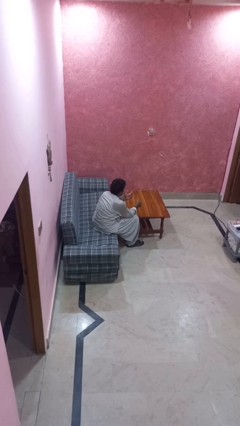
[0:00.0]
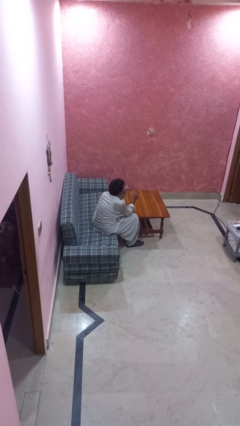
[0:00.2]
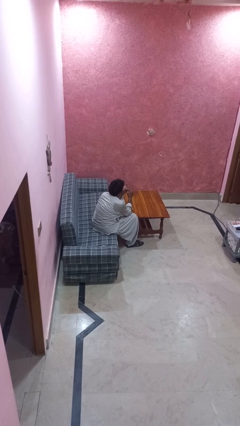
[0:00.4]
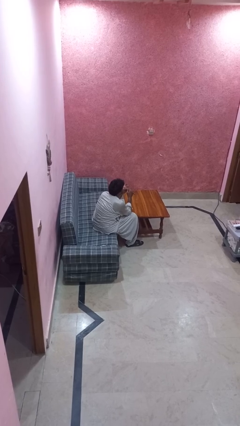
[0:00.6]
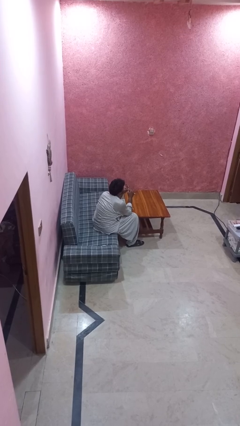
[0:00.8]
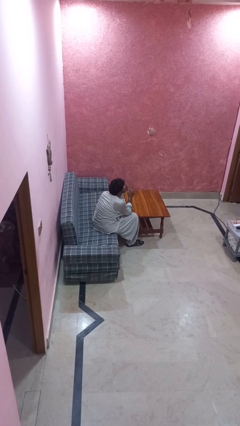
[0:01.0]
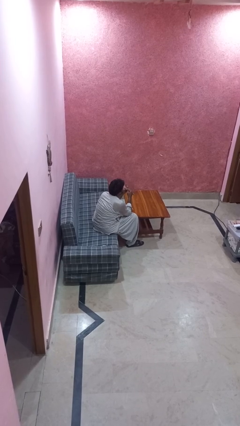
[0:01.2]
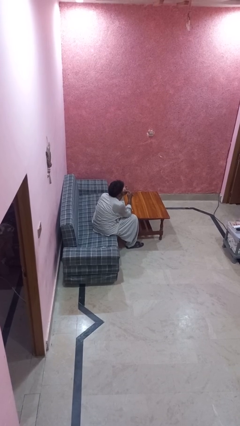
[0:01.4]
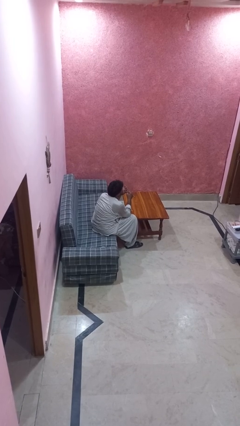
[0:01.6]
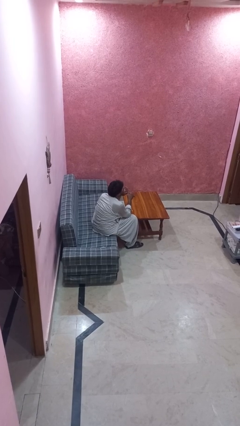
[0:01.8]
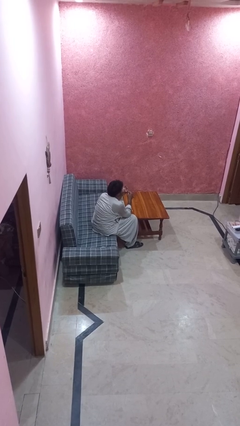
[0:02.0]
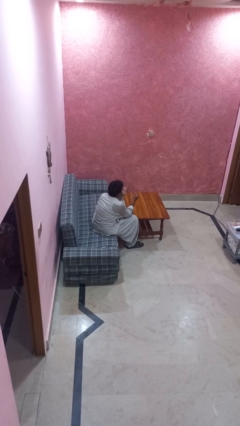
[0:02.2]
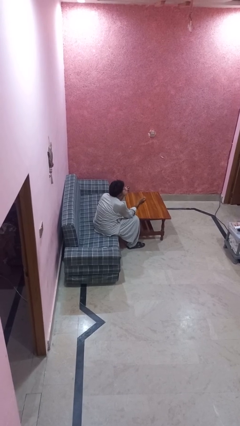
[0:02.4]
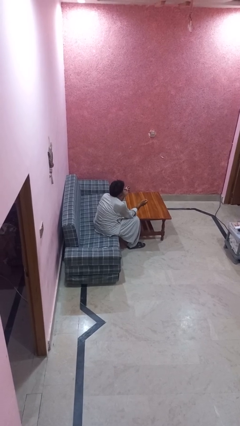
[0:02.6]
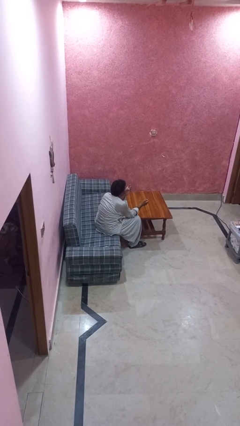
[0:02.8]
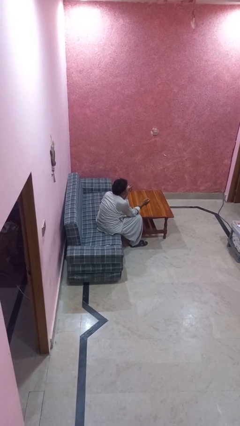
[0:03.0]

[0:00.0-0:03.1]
person files fingernails

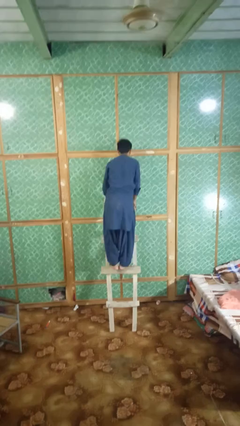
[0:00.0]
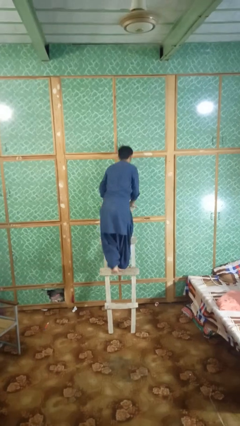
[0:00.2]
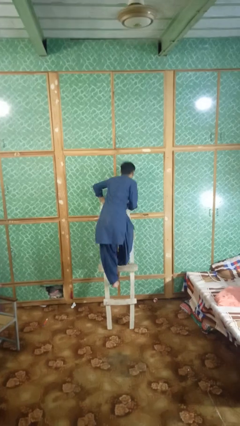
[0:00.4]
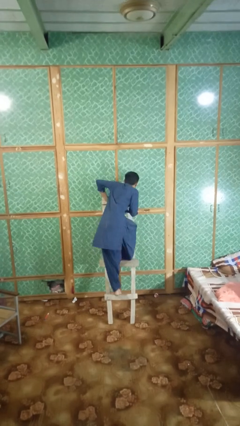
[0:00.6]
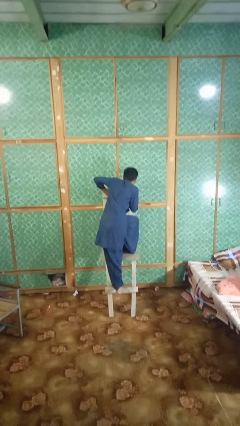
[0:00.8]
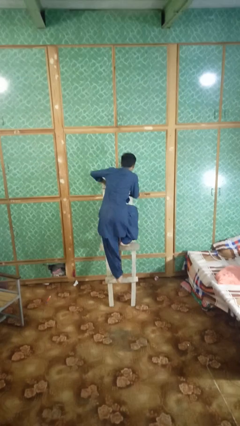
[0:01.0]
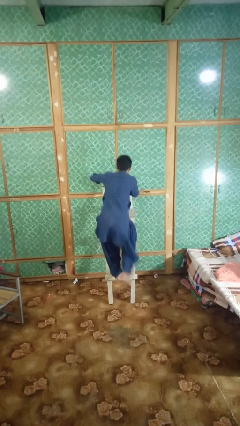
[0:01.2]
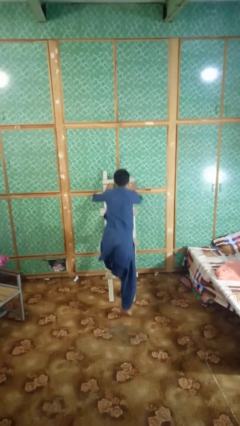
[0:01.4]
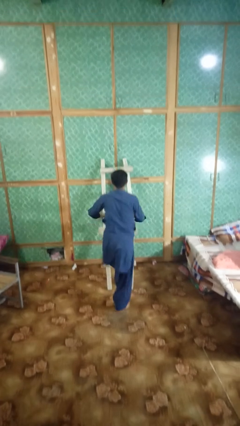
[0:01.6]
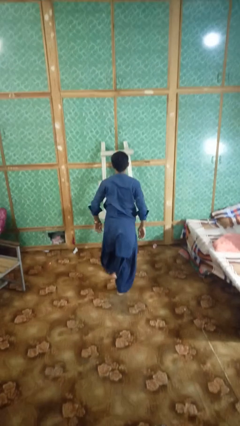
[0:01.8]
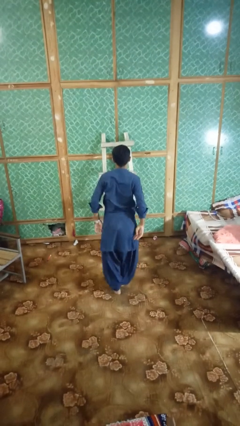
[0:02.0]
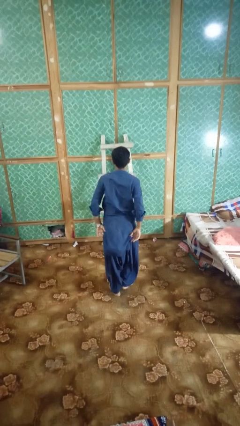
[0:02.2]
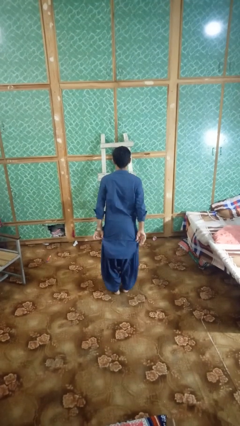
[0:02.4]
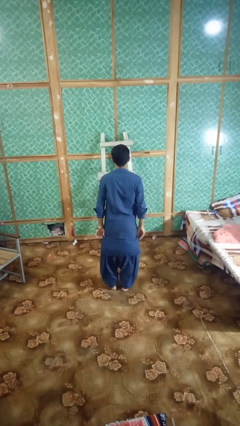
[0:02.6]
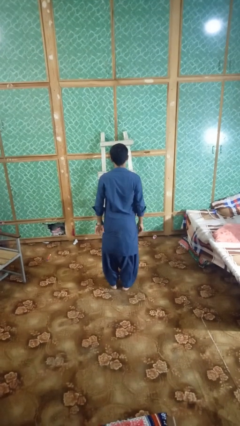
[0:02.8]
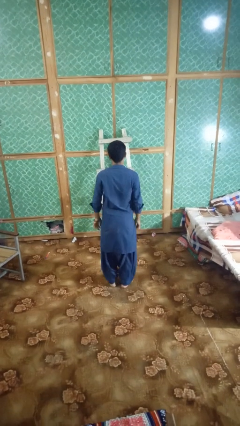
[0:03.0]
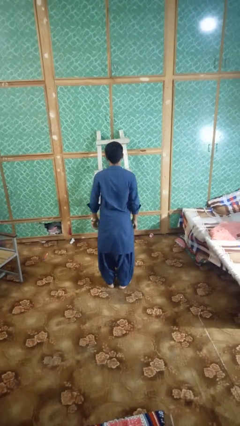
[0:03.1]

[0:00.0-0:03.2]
person climbs down ladder

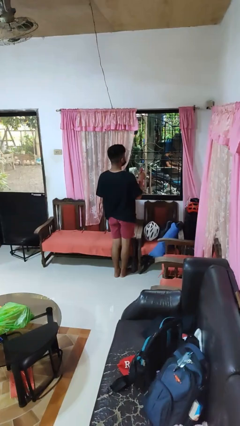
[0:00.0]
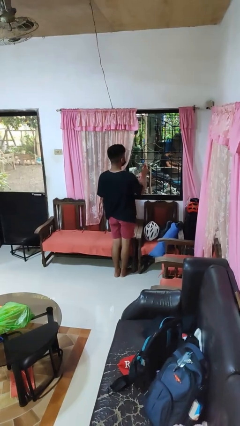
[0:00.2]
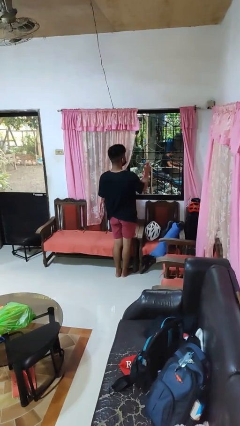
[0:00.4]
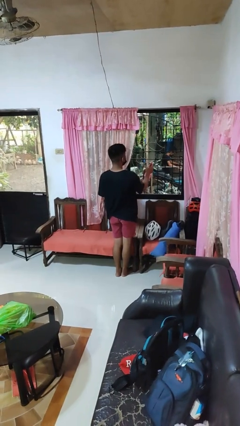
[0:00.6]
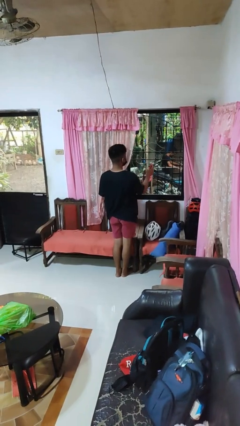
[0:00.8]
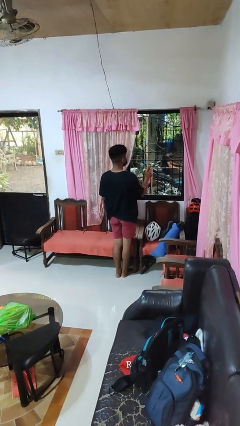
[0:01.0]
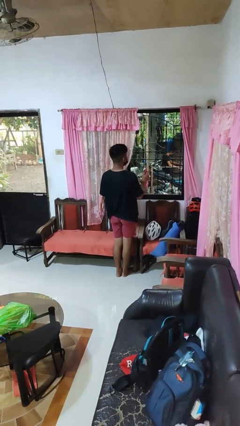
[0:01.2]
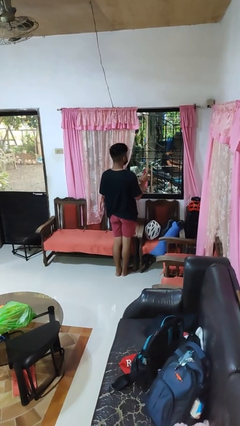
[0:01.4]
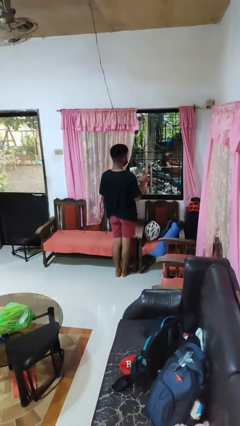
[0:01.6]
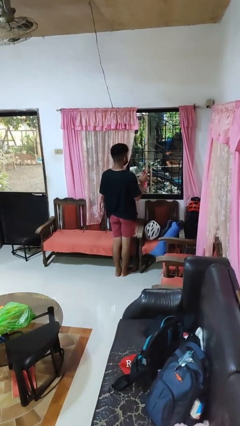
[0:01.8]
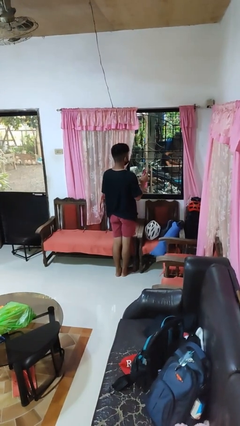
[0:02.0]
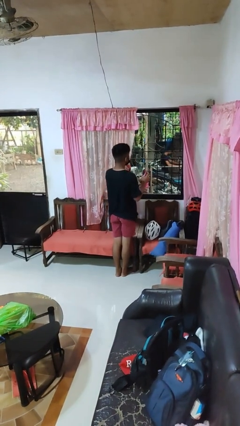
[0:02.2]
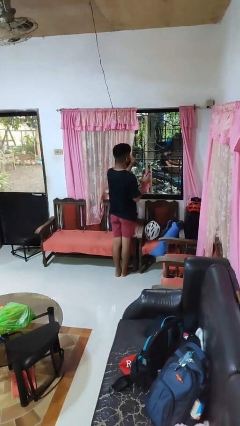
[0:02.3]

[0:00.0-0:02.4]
person sprays from bottle

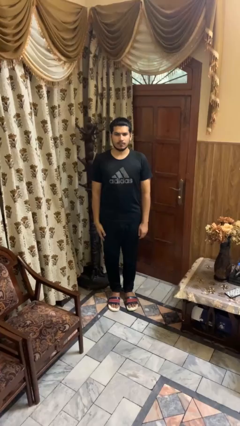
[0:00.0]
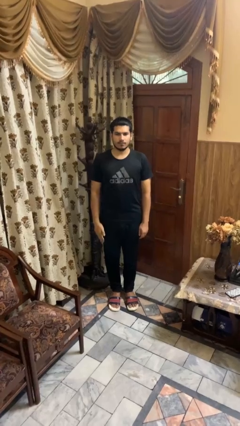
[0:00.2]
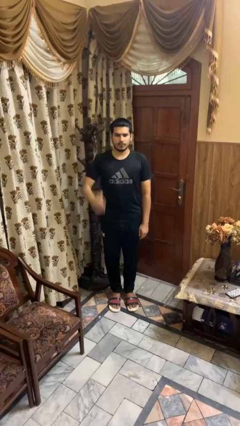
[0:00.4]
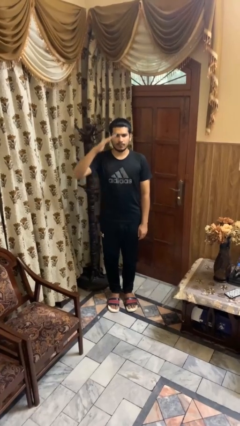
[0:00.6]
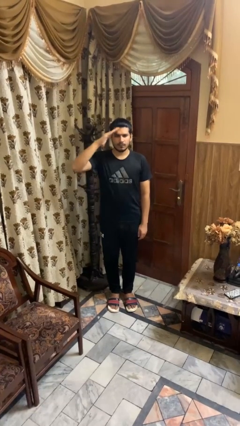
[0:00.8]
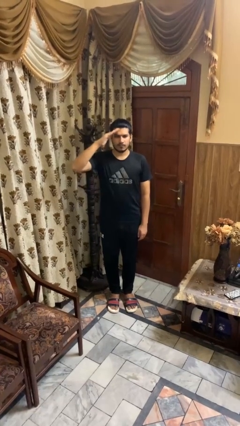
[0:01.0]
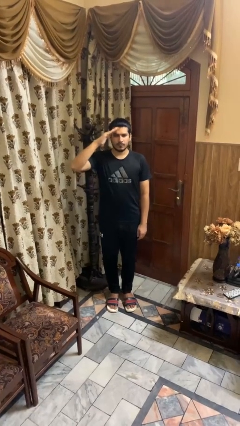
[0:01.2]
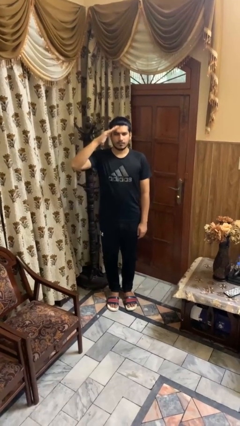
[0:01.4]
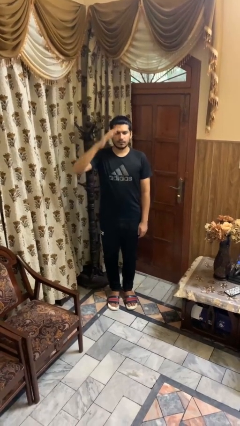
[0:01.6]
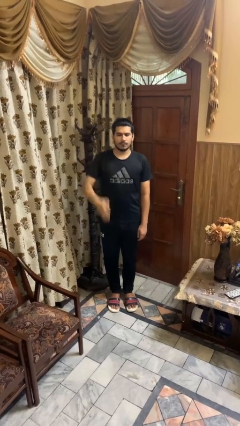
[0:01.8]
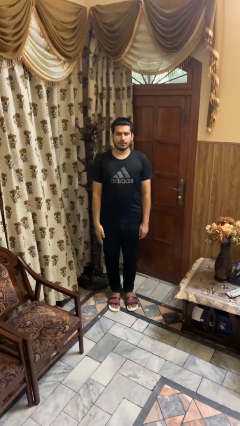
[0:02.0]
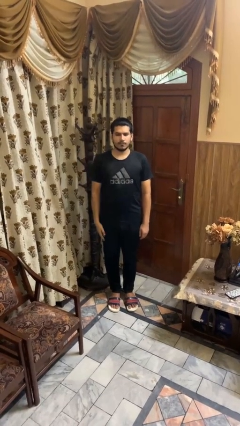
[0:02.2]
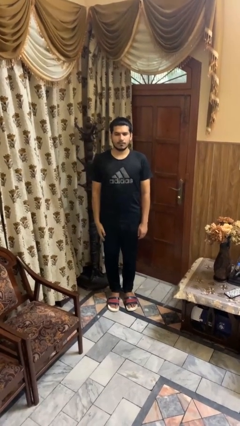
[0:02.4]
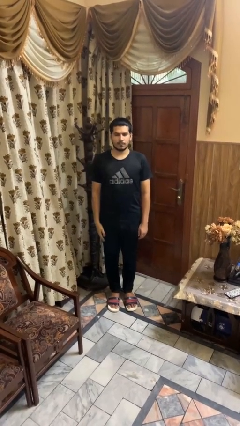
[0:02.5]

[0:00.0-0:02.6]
person salutes

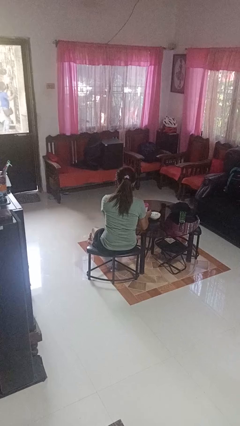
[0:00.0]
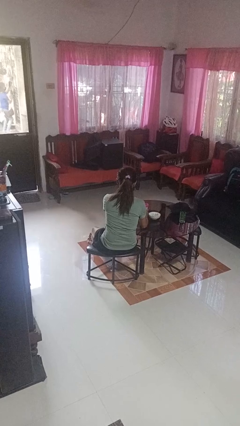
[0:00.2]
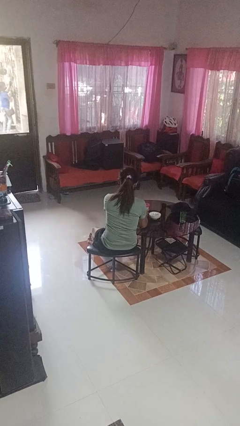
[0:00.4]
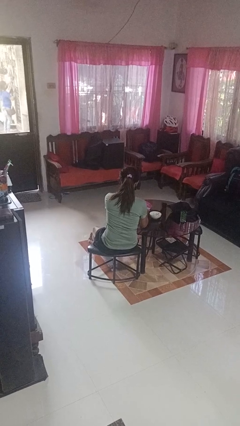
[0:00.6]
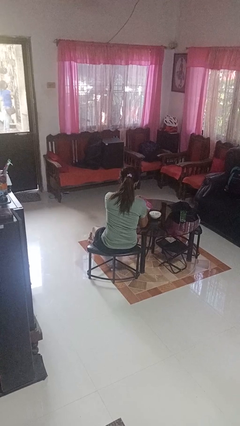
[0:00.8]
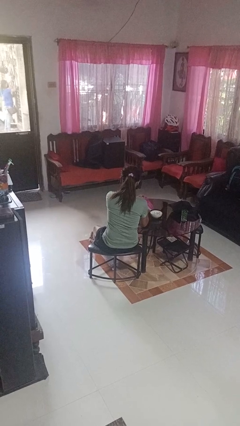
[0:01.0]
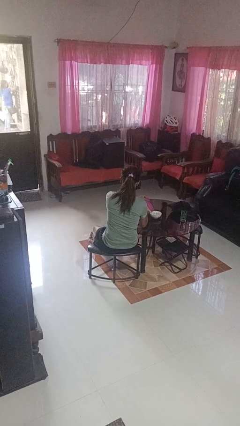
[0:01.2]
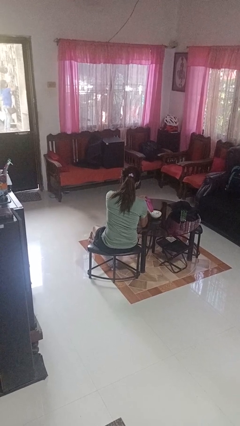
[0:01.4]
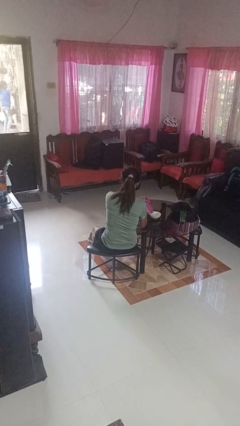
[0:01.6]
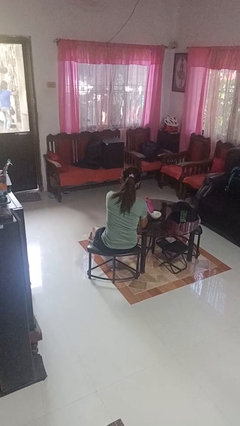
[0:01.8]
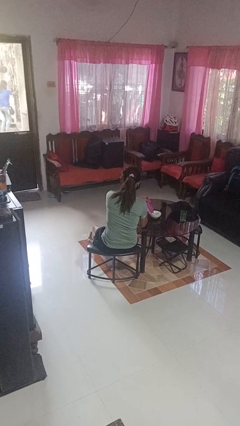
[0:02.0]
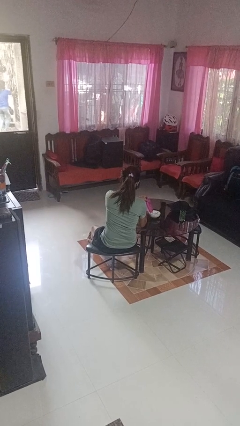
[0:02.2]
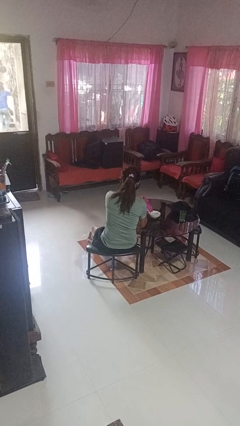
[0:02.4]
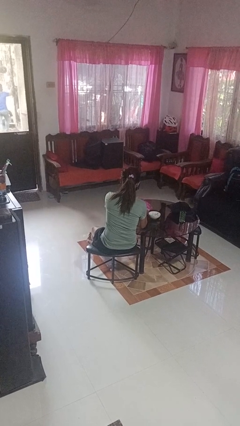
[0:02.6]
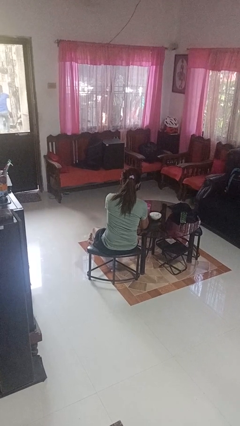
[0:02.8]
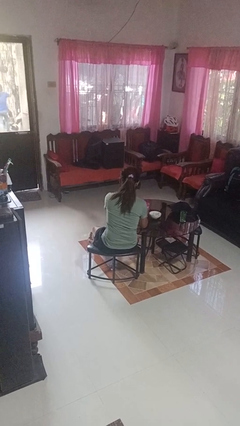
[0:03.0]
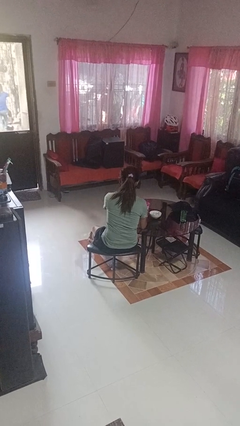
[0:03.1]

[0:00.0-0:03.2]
person pours into bowl

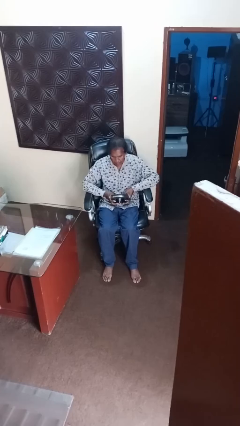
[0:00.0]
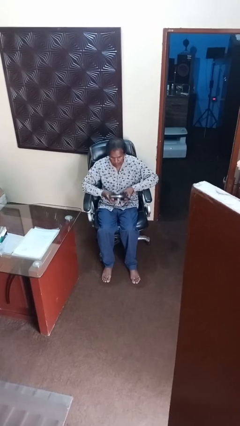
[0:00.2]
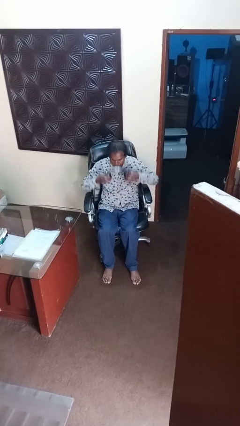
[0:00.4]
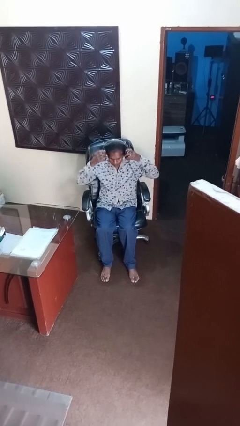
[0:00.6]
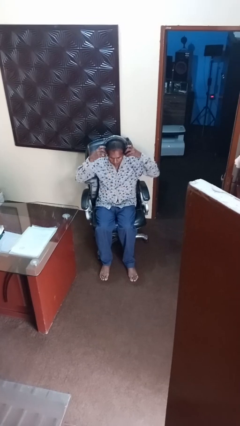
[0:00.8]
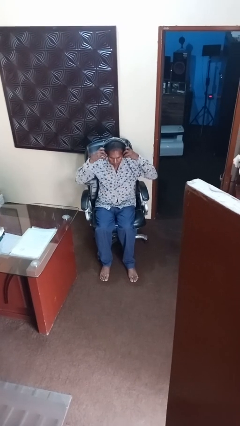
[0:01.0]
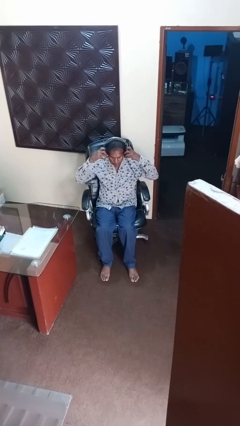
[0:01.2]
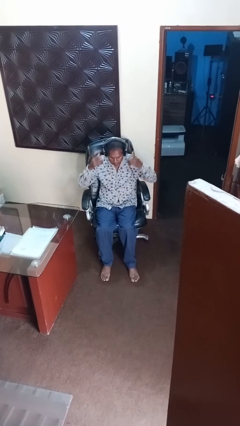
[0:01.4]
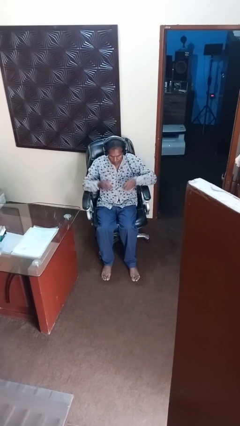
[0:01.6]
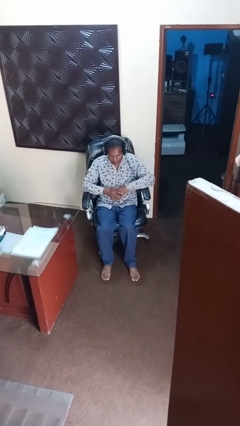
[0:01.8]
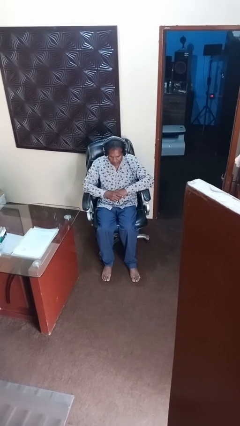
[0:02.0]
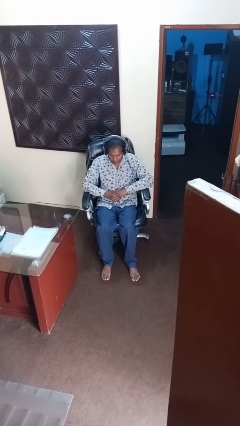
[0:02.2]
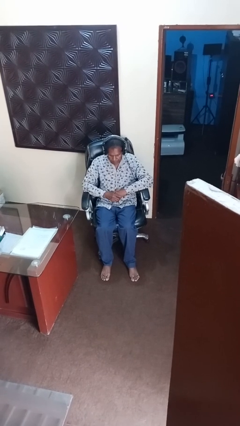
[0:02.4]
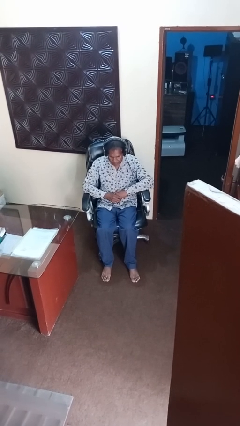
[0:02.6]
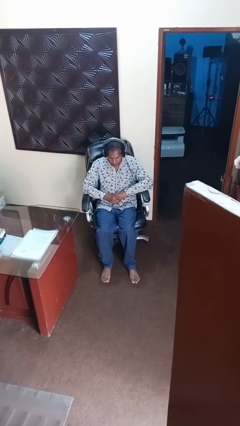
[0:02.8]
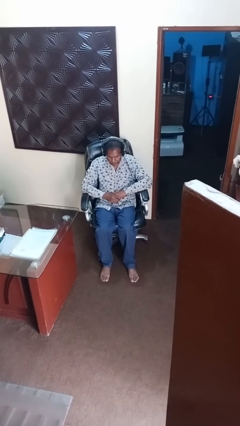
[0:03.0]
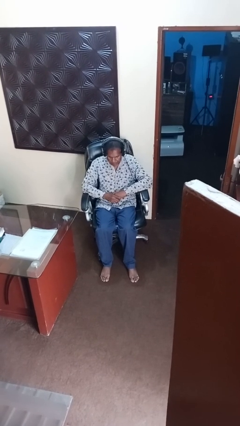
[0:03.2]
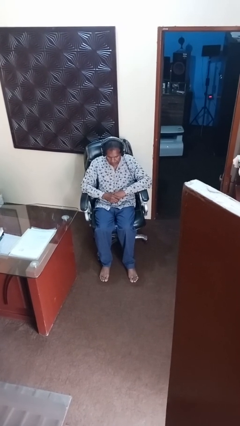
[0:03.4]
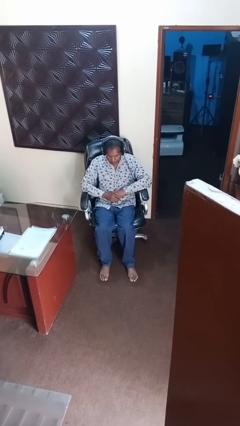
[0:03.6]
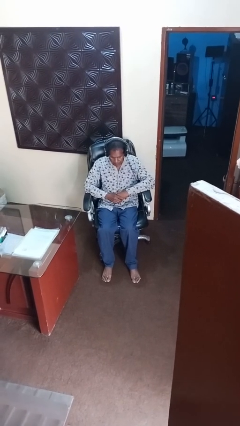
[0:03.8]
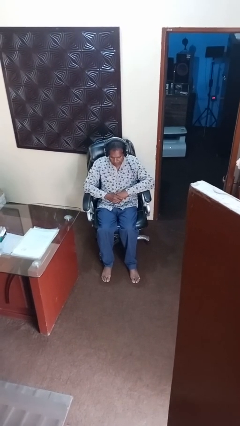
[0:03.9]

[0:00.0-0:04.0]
person puts on headphones
